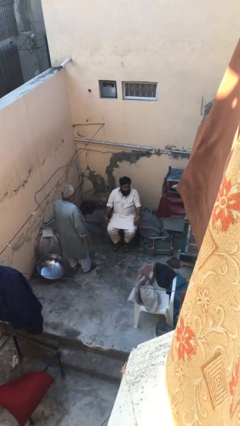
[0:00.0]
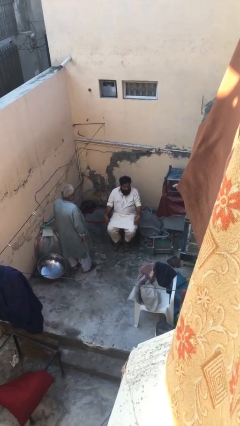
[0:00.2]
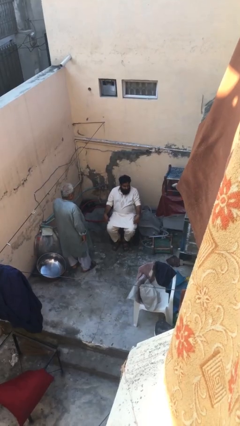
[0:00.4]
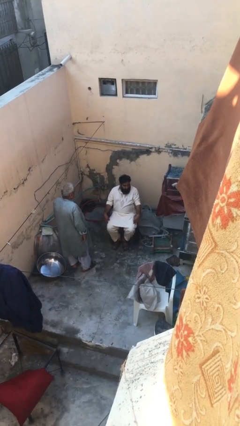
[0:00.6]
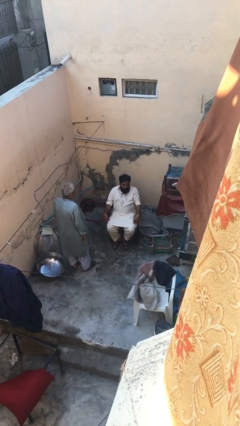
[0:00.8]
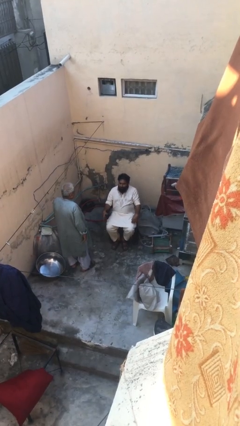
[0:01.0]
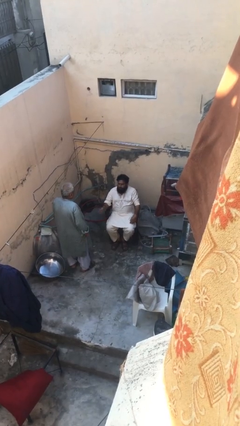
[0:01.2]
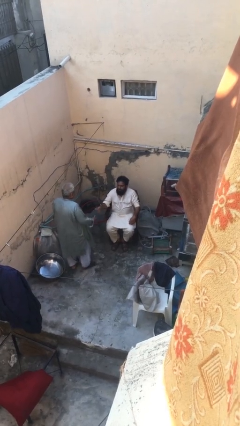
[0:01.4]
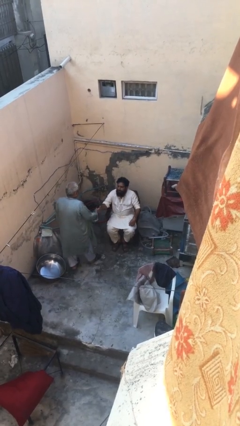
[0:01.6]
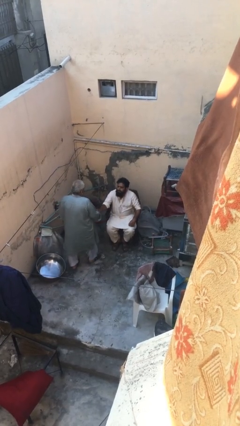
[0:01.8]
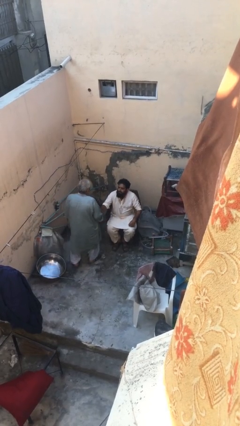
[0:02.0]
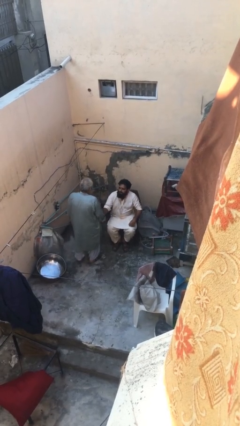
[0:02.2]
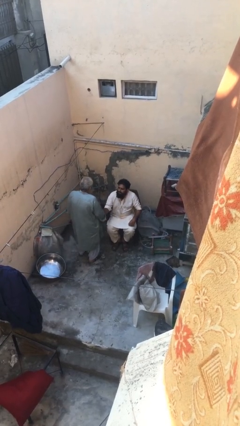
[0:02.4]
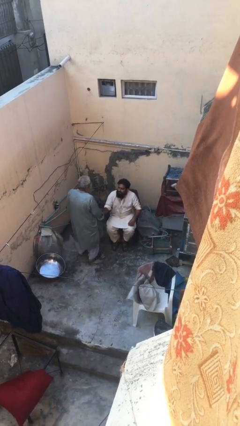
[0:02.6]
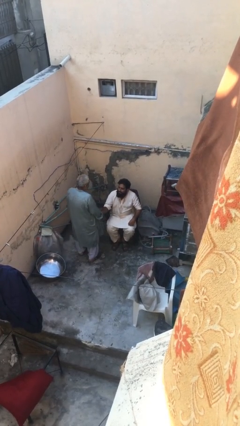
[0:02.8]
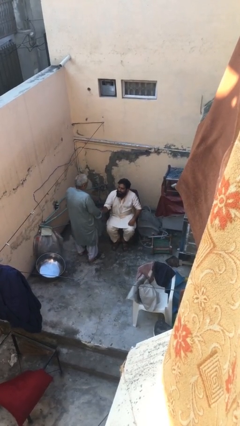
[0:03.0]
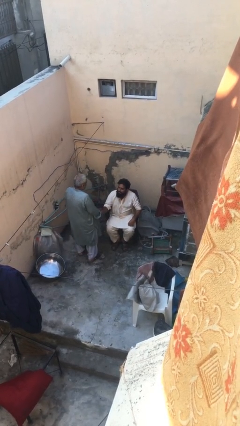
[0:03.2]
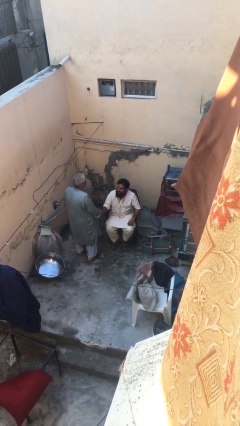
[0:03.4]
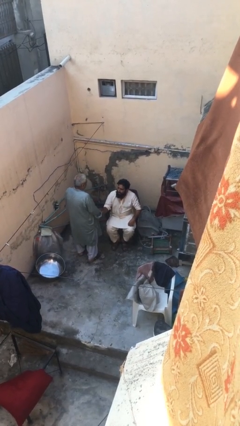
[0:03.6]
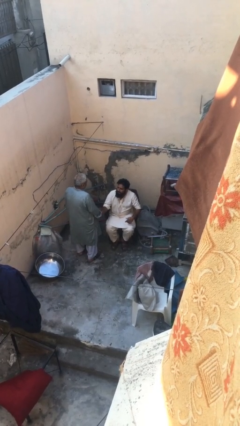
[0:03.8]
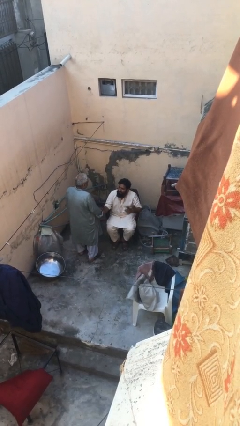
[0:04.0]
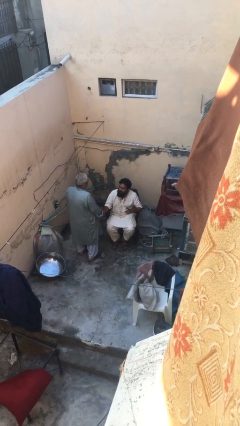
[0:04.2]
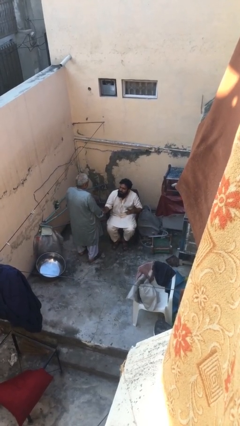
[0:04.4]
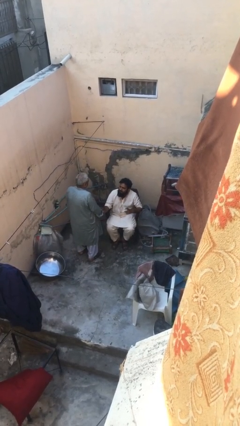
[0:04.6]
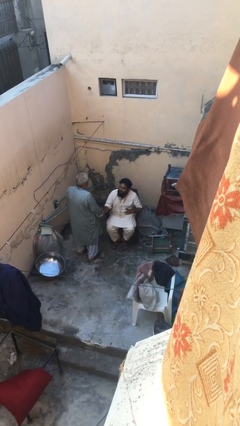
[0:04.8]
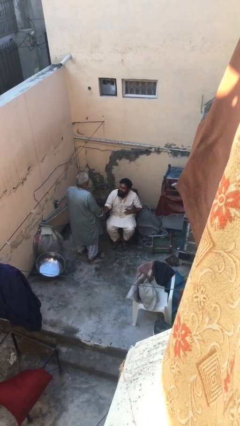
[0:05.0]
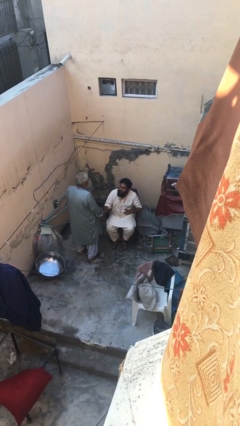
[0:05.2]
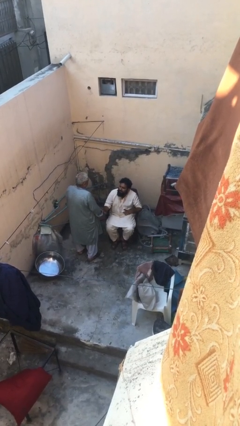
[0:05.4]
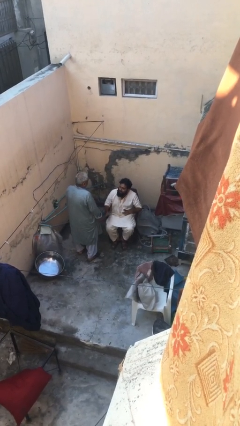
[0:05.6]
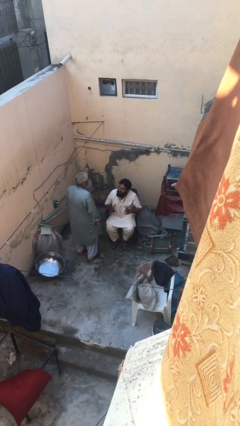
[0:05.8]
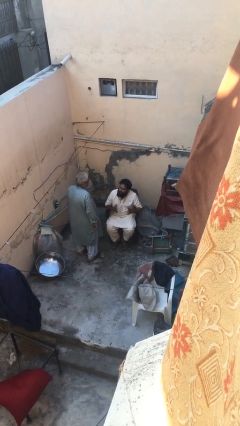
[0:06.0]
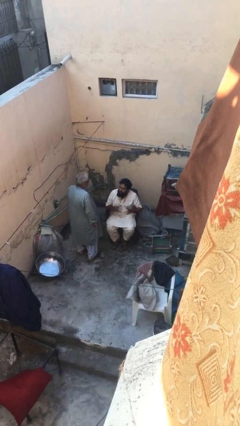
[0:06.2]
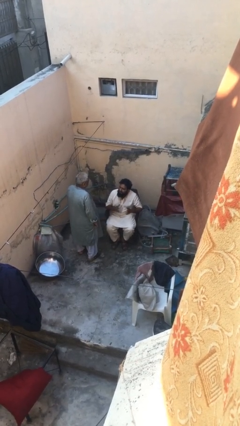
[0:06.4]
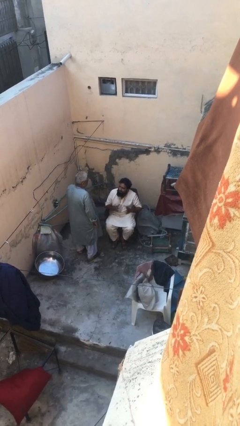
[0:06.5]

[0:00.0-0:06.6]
person shakes hand

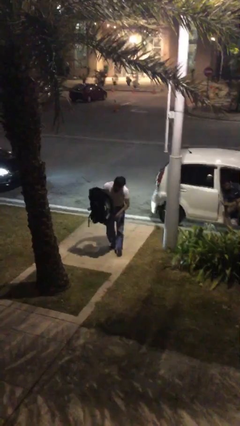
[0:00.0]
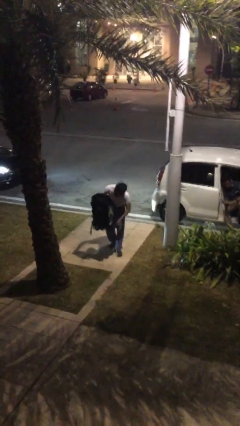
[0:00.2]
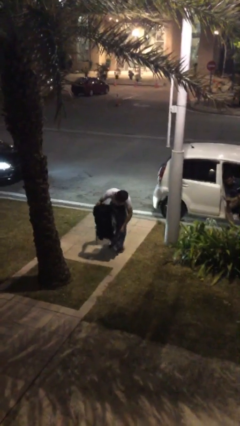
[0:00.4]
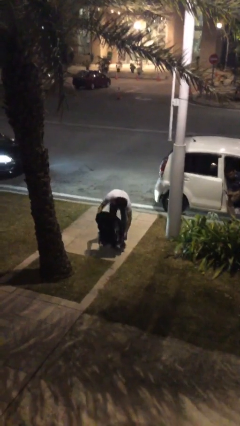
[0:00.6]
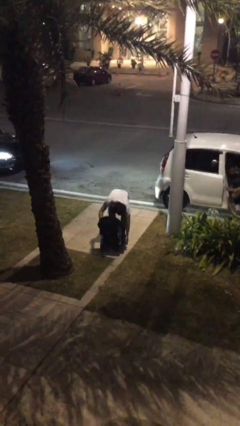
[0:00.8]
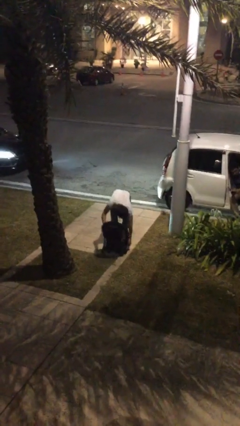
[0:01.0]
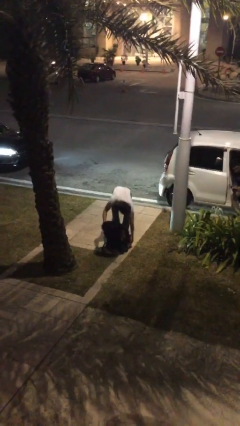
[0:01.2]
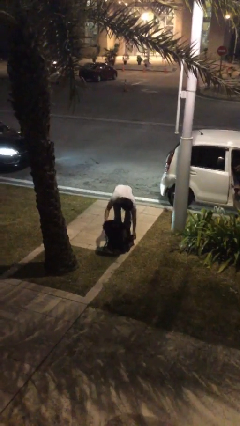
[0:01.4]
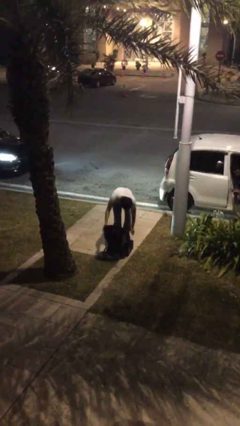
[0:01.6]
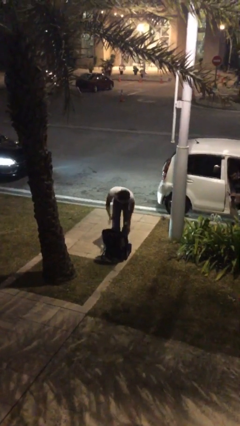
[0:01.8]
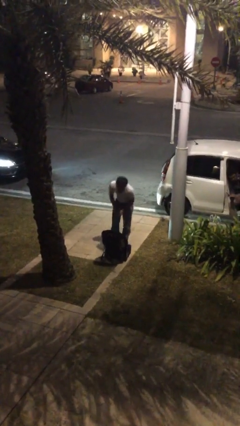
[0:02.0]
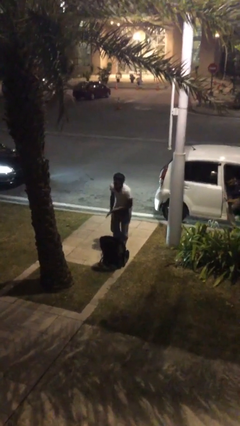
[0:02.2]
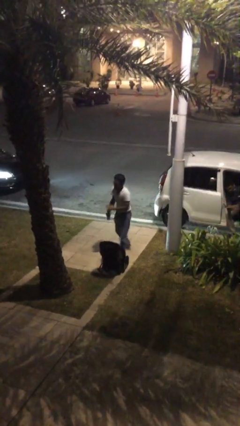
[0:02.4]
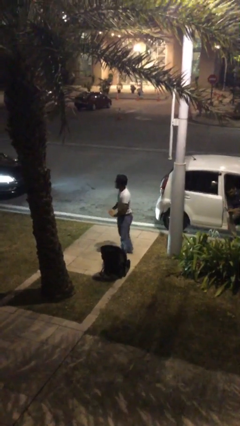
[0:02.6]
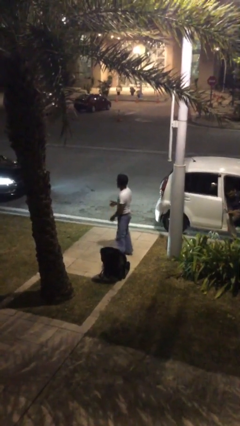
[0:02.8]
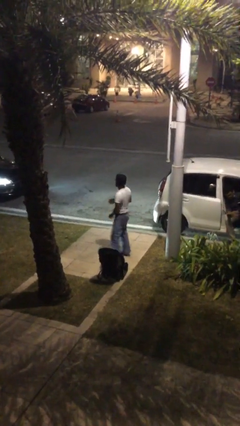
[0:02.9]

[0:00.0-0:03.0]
person puts down object on floor

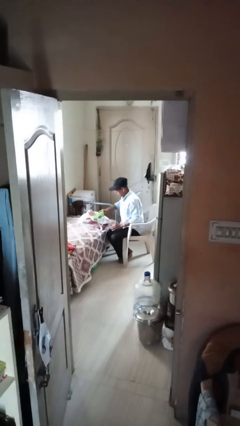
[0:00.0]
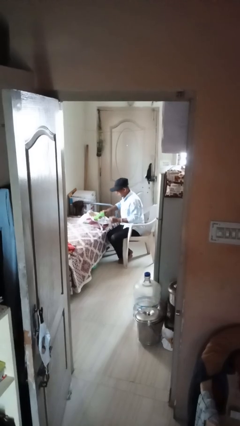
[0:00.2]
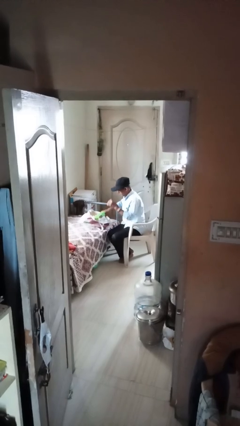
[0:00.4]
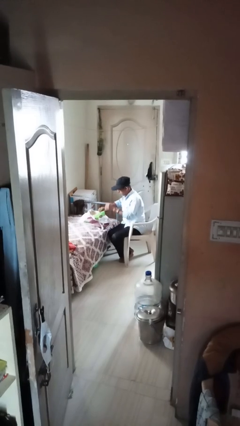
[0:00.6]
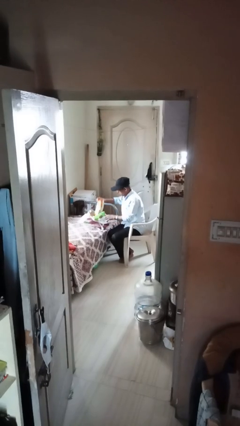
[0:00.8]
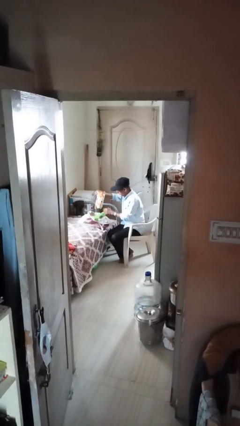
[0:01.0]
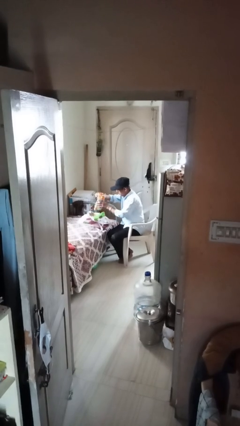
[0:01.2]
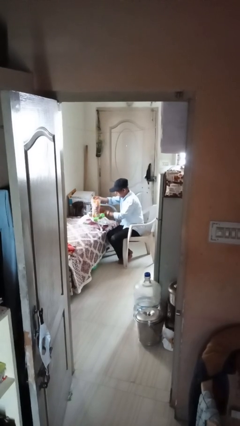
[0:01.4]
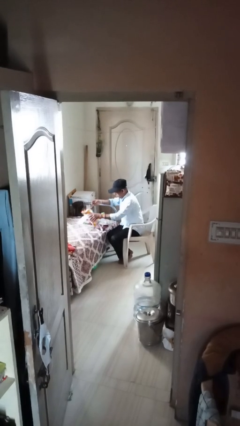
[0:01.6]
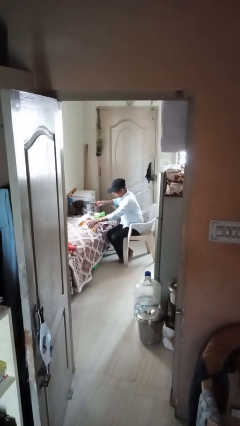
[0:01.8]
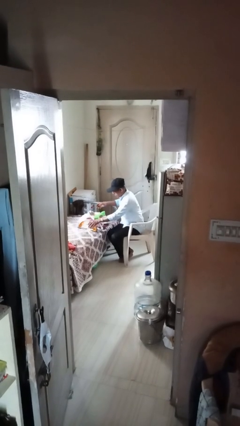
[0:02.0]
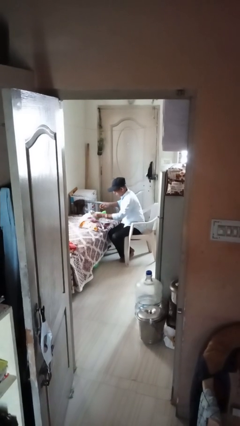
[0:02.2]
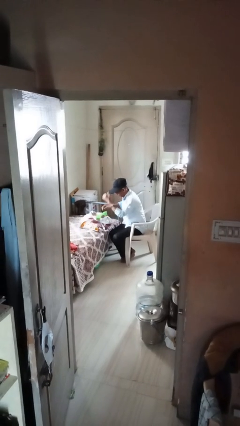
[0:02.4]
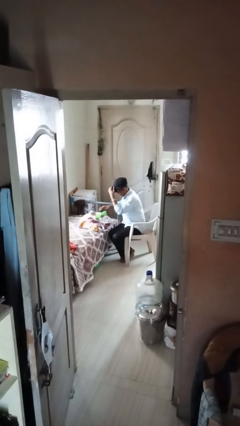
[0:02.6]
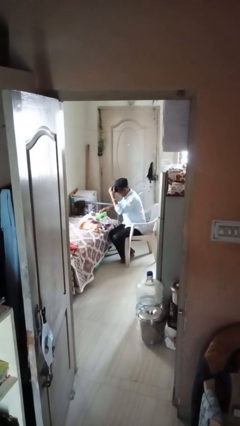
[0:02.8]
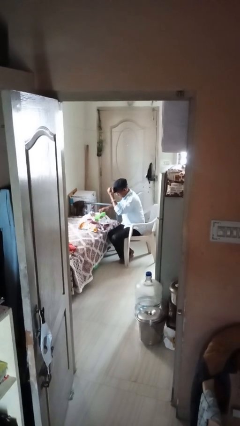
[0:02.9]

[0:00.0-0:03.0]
person takes object from bag

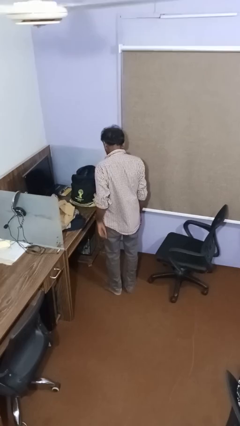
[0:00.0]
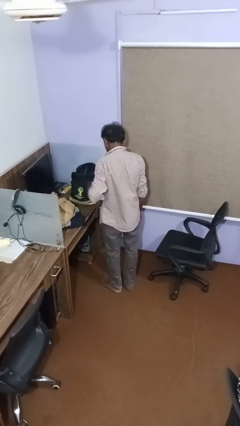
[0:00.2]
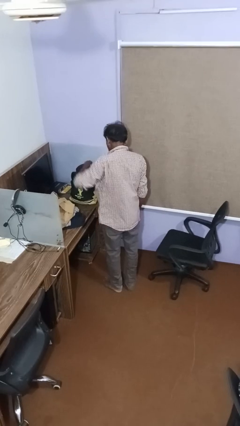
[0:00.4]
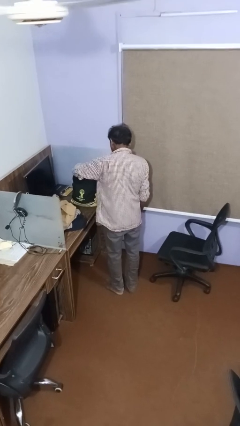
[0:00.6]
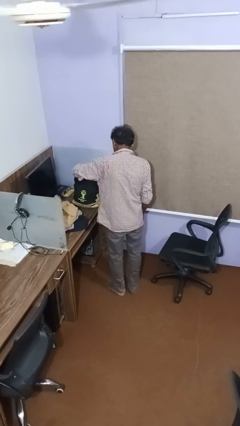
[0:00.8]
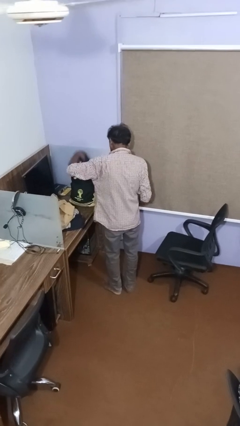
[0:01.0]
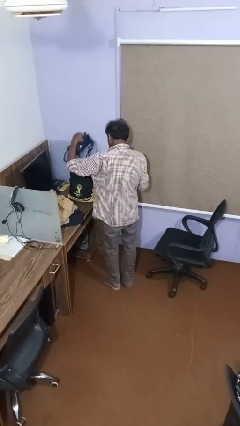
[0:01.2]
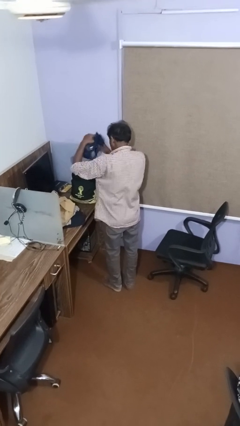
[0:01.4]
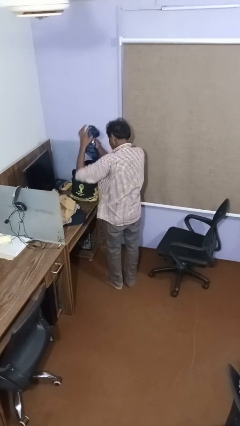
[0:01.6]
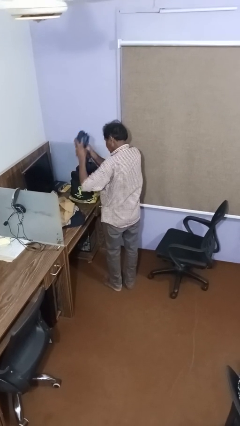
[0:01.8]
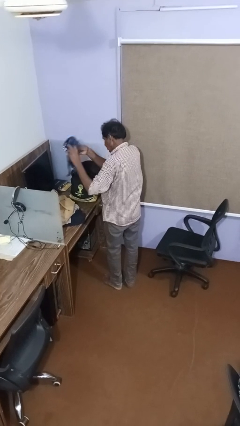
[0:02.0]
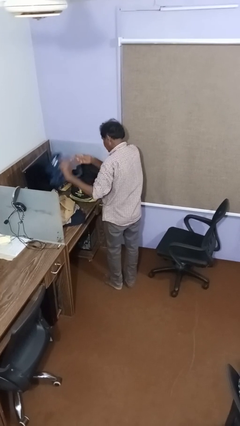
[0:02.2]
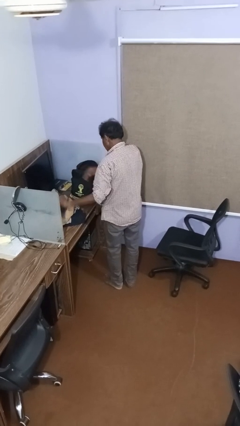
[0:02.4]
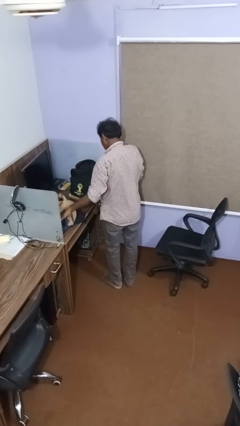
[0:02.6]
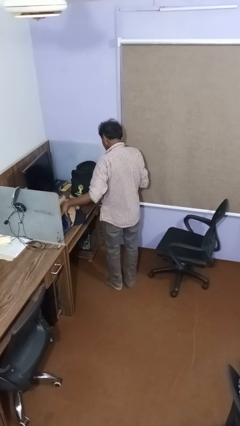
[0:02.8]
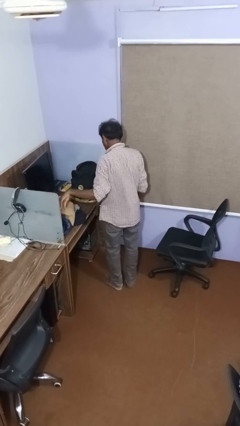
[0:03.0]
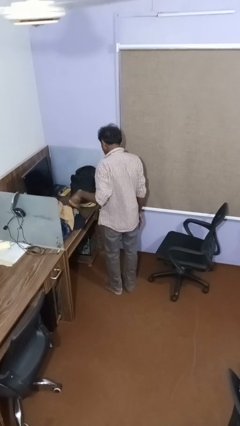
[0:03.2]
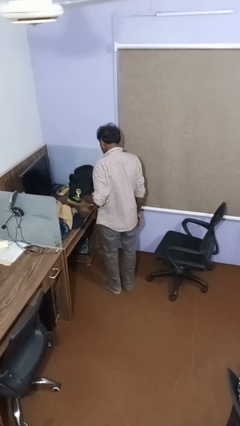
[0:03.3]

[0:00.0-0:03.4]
person unloads clothes from suitcase

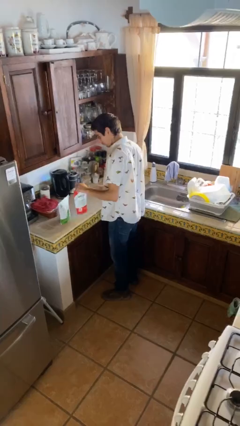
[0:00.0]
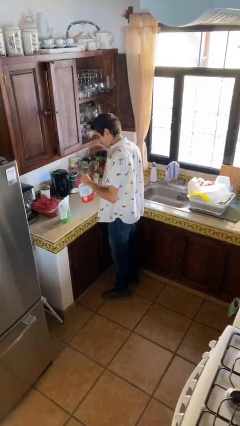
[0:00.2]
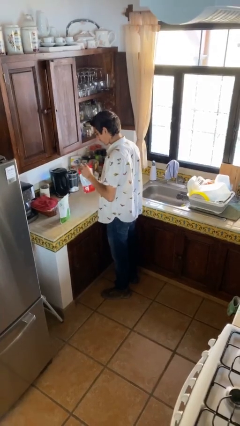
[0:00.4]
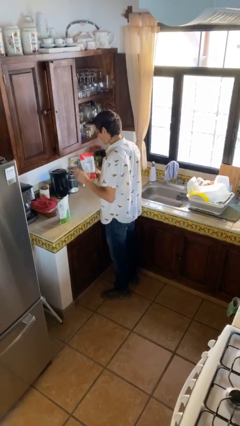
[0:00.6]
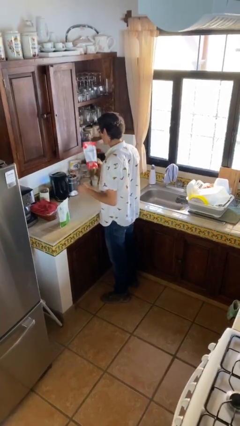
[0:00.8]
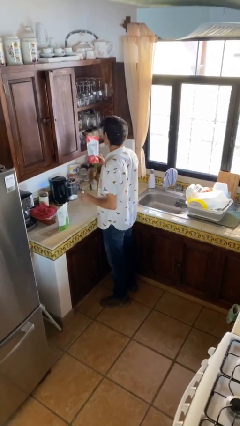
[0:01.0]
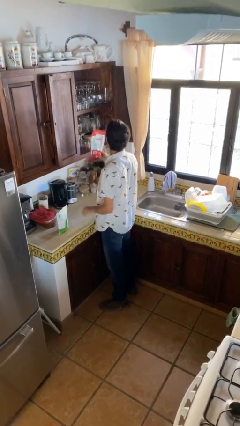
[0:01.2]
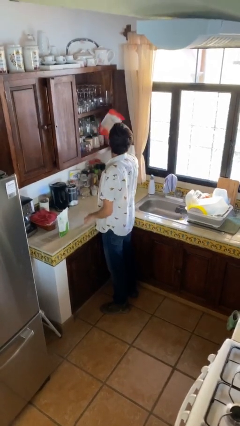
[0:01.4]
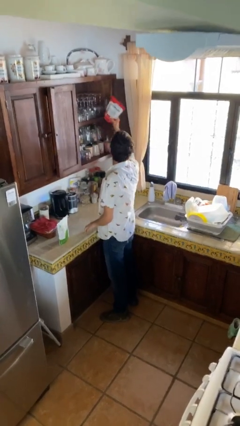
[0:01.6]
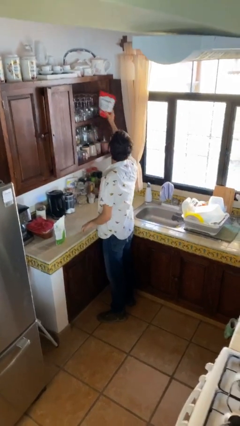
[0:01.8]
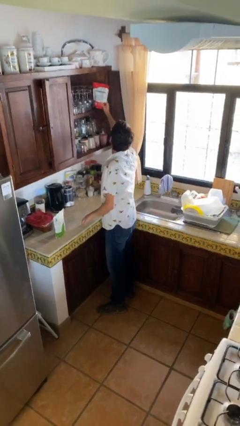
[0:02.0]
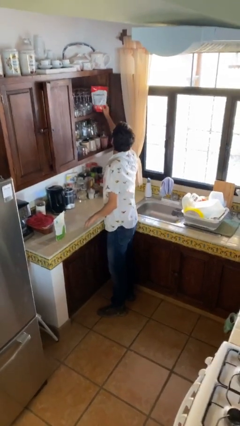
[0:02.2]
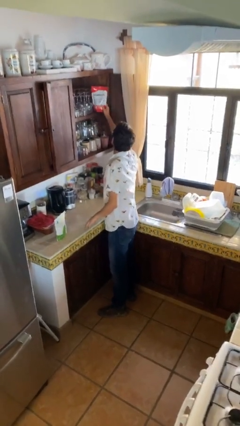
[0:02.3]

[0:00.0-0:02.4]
person picks up object from table
